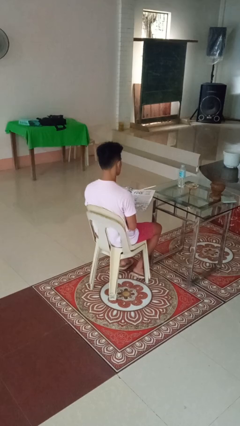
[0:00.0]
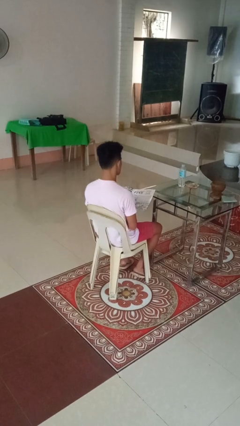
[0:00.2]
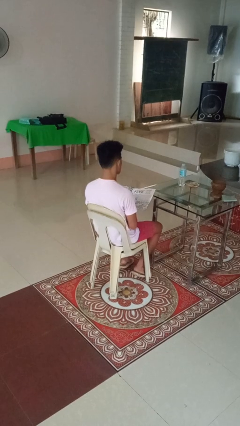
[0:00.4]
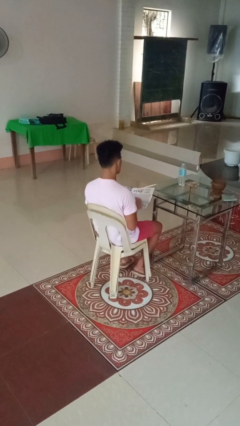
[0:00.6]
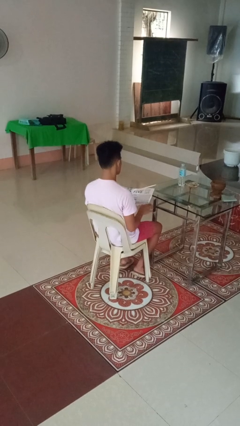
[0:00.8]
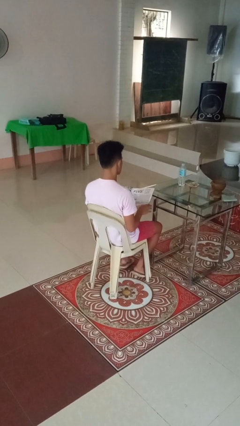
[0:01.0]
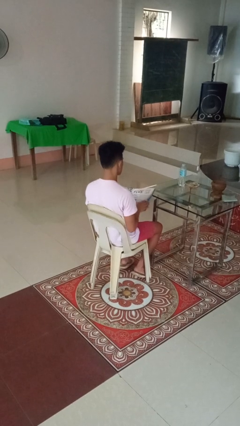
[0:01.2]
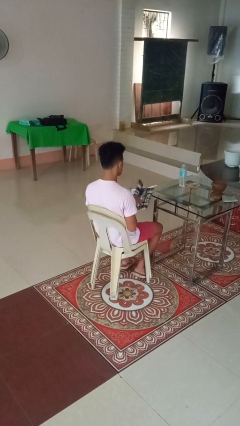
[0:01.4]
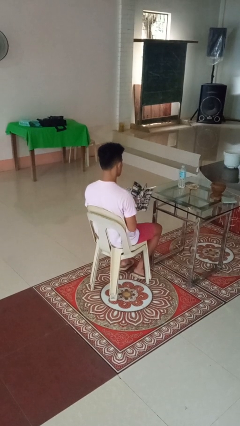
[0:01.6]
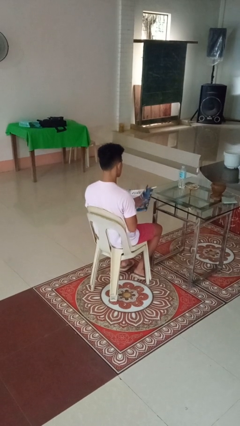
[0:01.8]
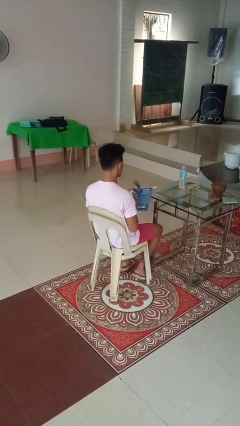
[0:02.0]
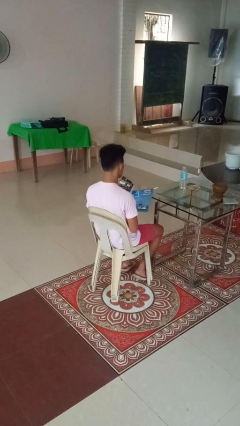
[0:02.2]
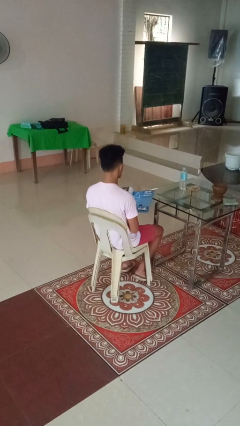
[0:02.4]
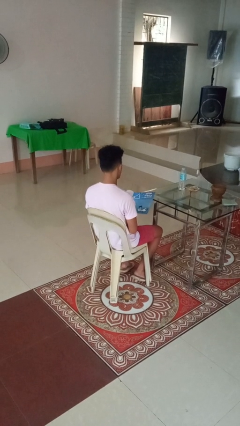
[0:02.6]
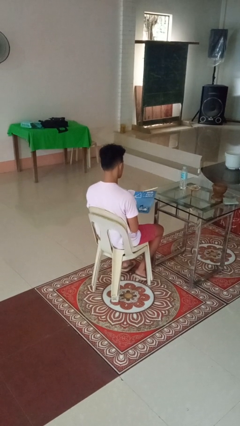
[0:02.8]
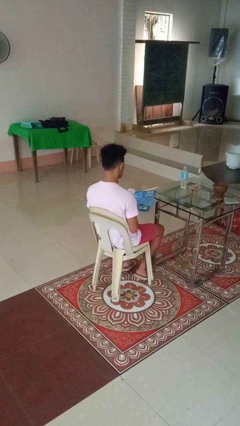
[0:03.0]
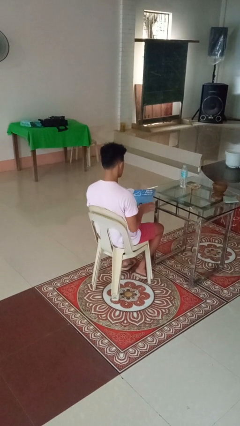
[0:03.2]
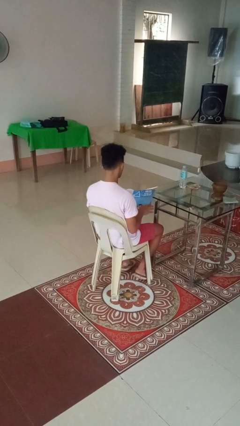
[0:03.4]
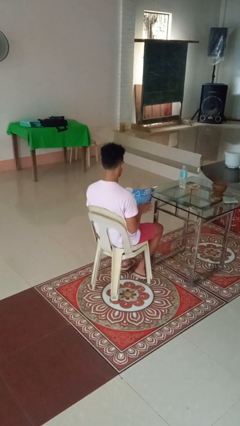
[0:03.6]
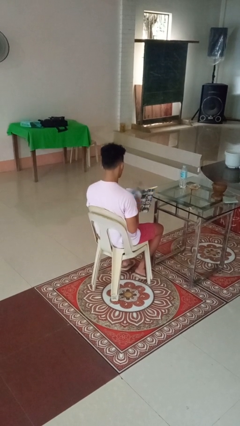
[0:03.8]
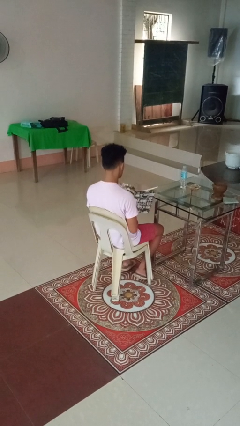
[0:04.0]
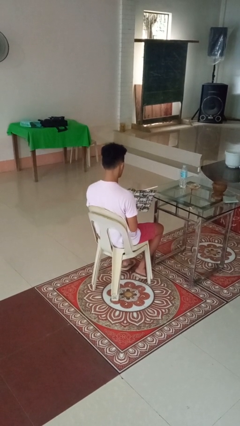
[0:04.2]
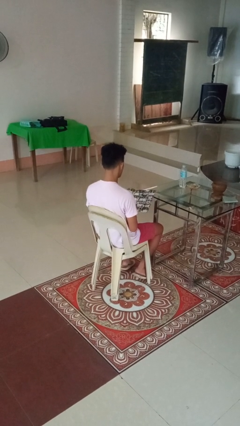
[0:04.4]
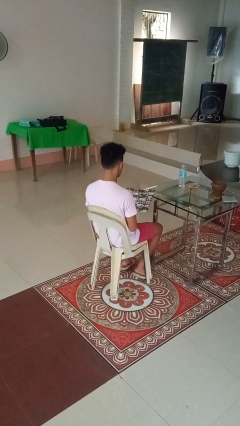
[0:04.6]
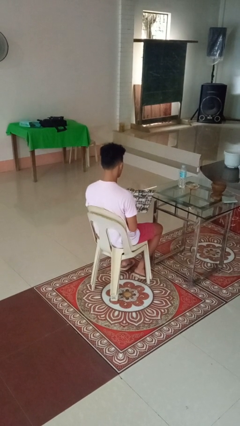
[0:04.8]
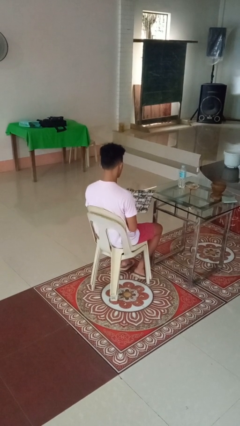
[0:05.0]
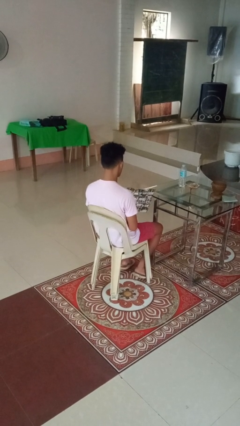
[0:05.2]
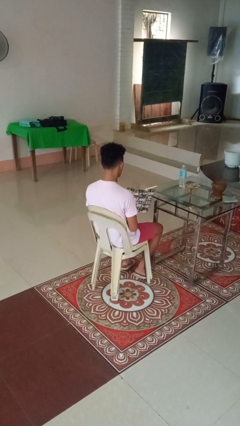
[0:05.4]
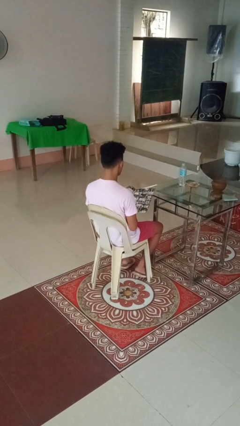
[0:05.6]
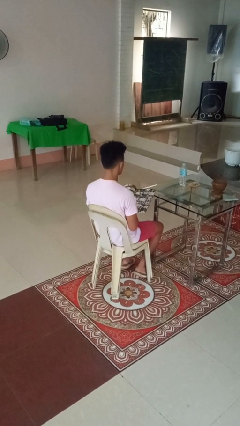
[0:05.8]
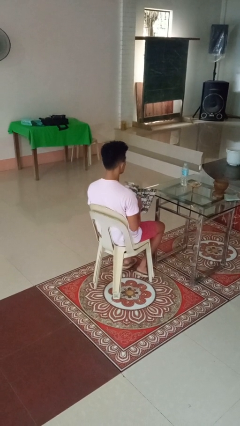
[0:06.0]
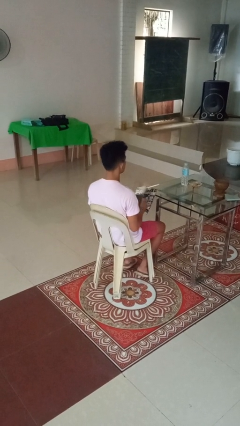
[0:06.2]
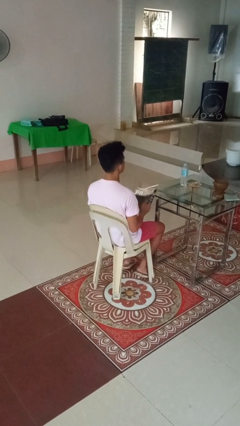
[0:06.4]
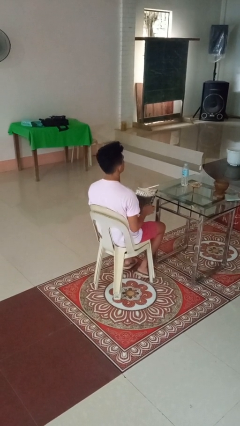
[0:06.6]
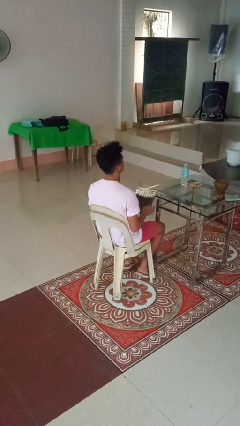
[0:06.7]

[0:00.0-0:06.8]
person reads magazine

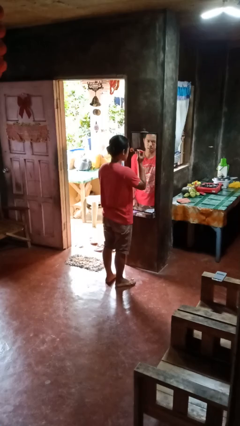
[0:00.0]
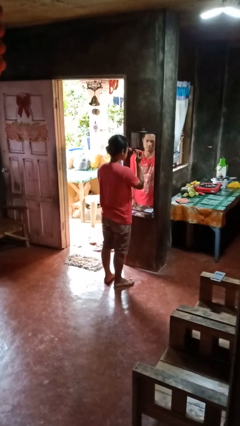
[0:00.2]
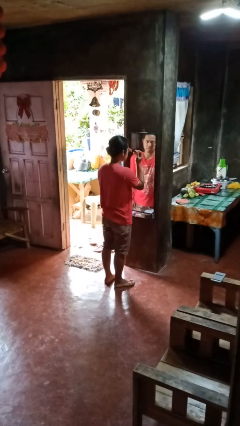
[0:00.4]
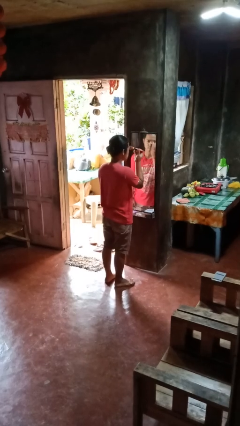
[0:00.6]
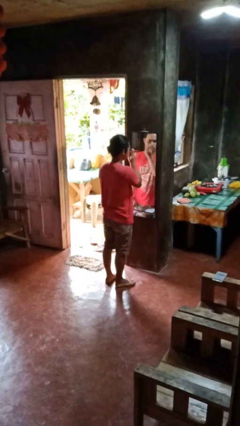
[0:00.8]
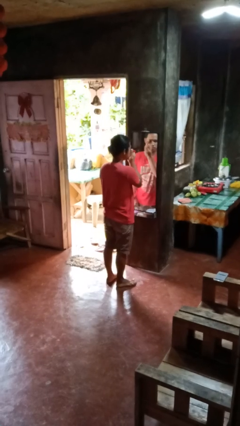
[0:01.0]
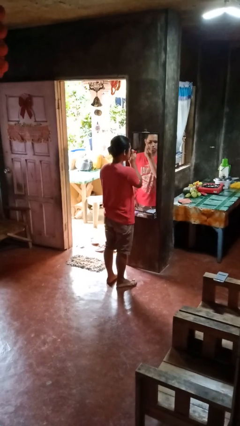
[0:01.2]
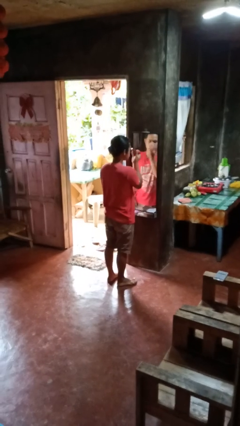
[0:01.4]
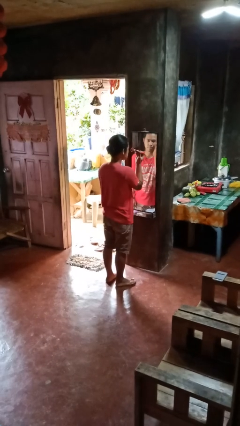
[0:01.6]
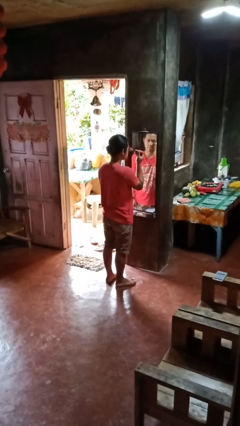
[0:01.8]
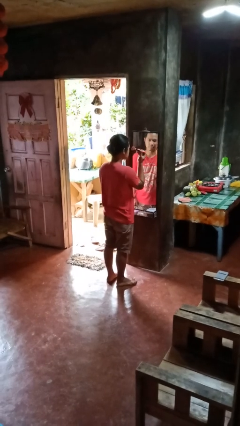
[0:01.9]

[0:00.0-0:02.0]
person applies eye makeup

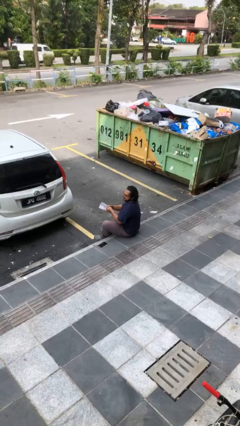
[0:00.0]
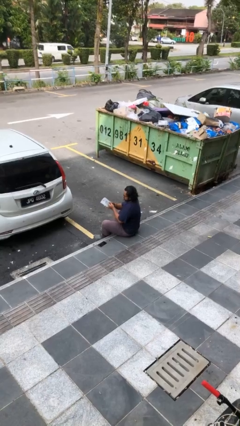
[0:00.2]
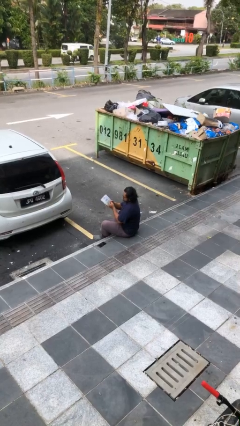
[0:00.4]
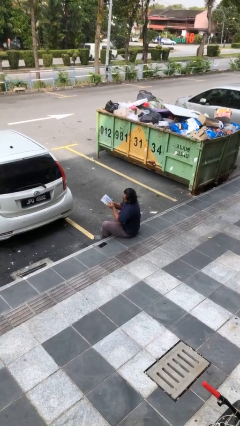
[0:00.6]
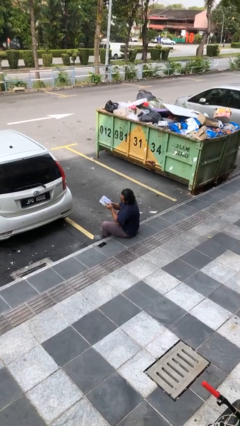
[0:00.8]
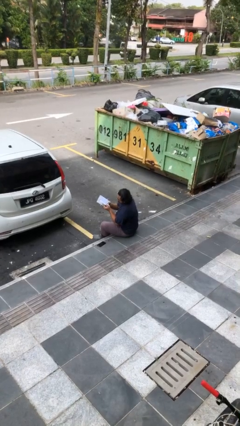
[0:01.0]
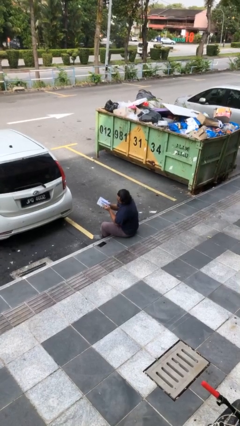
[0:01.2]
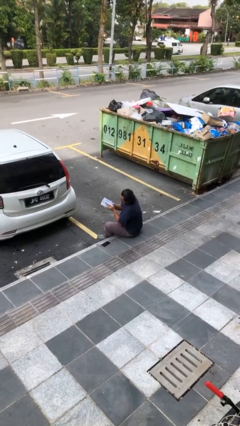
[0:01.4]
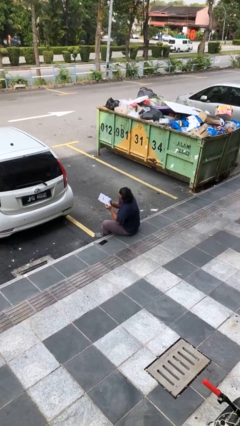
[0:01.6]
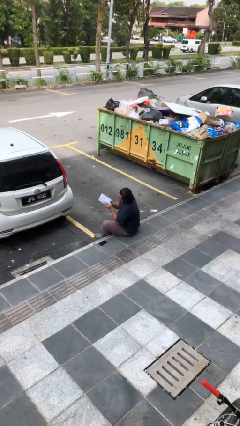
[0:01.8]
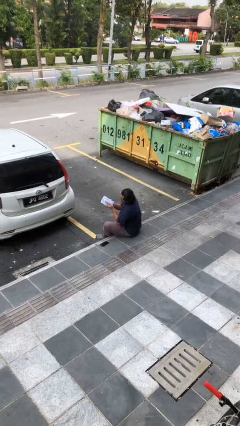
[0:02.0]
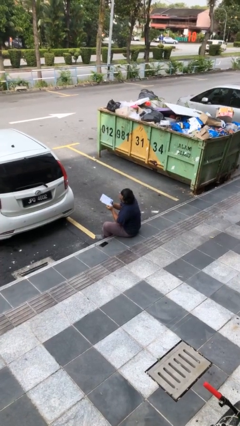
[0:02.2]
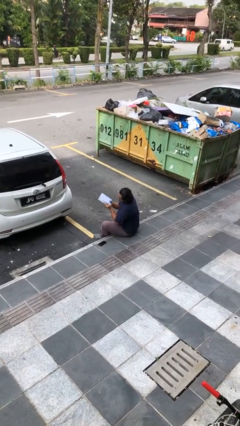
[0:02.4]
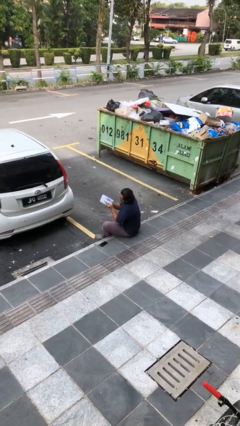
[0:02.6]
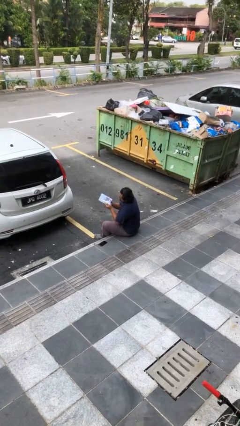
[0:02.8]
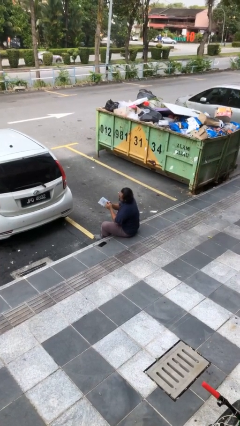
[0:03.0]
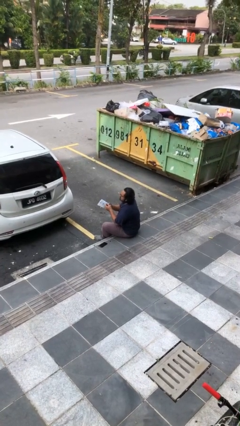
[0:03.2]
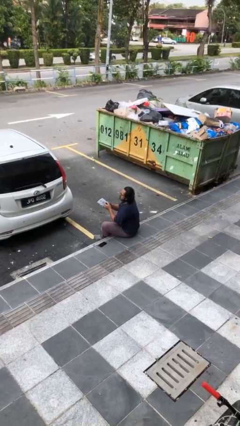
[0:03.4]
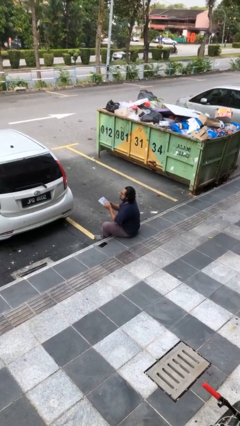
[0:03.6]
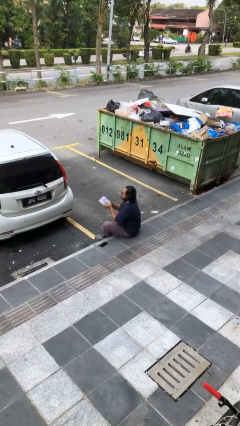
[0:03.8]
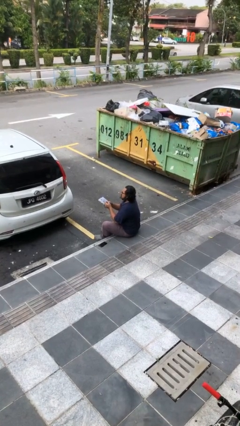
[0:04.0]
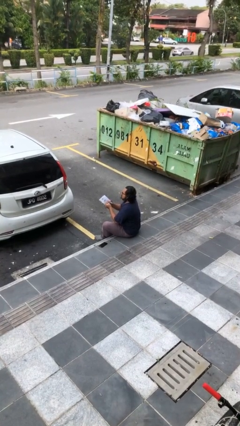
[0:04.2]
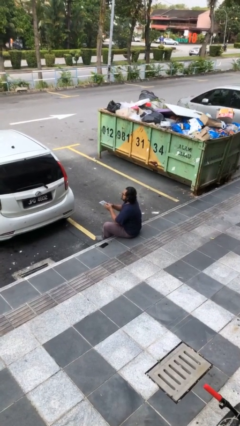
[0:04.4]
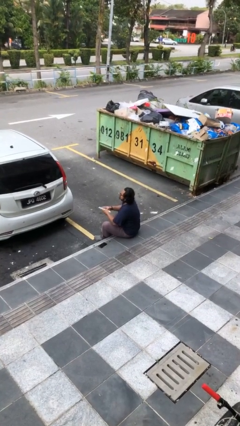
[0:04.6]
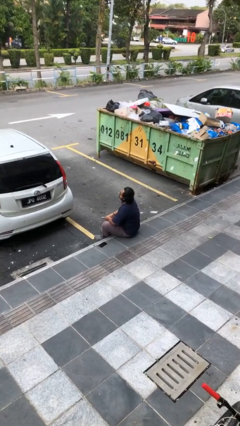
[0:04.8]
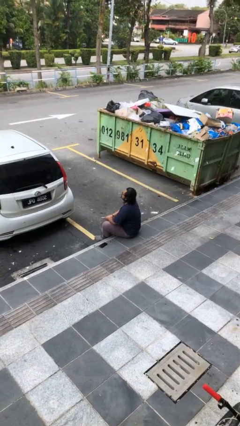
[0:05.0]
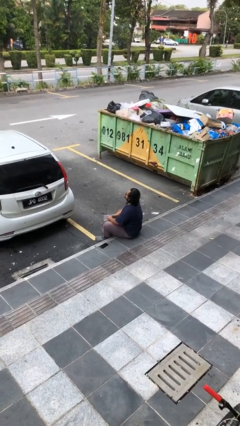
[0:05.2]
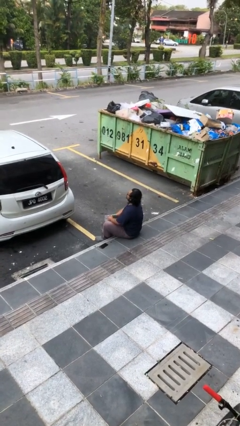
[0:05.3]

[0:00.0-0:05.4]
person reads document

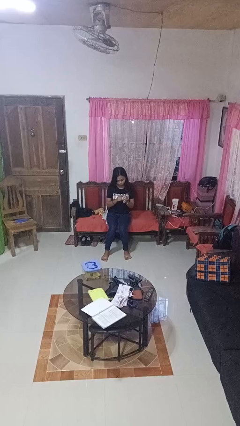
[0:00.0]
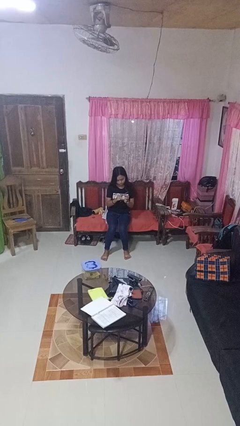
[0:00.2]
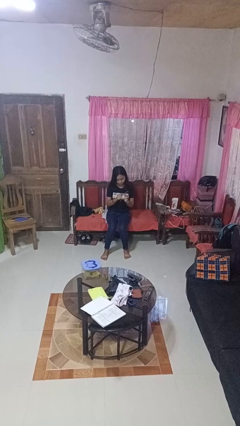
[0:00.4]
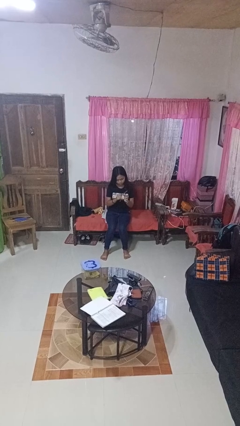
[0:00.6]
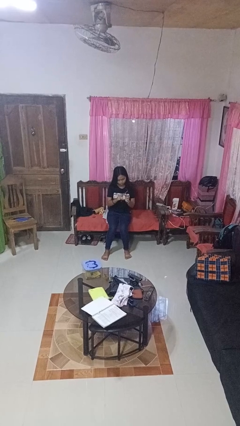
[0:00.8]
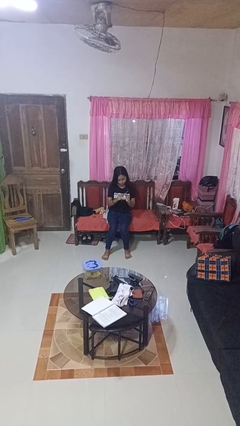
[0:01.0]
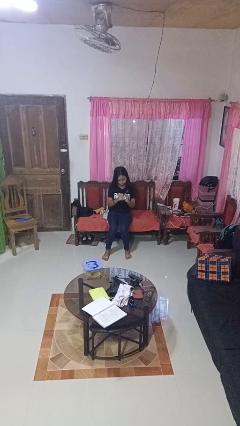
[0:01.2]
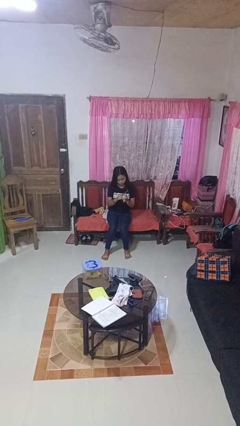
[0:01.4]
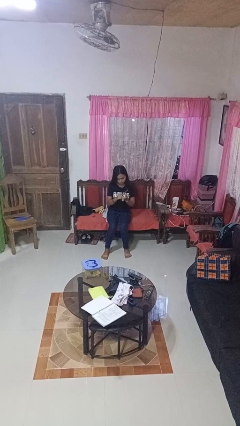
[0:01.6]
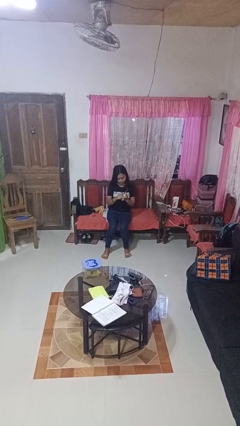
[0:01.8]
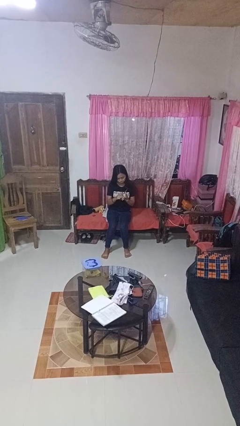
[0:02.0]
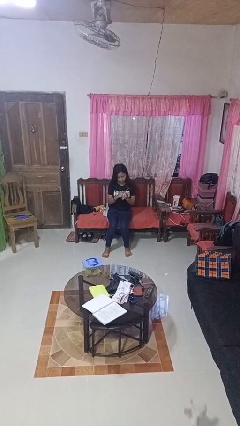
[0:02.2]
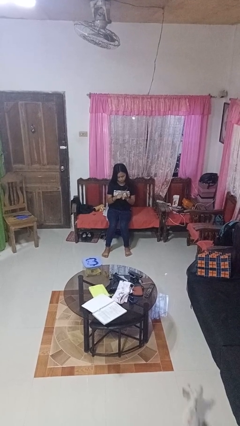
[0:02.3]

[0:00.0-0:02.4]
person files fingernails

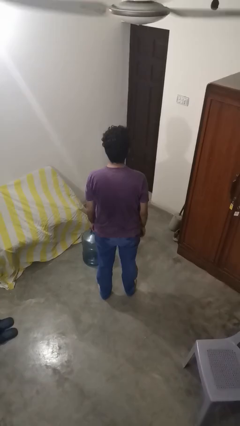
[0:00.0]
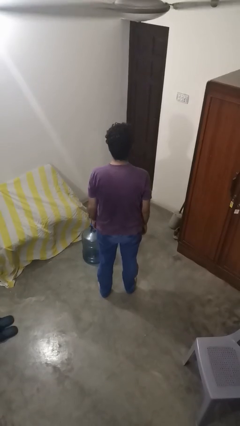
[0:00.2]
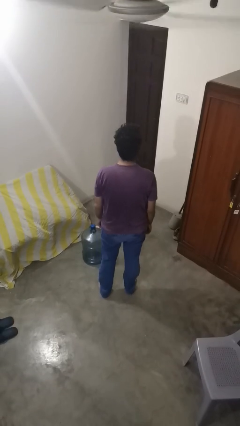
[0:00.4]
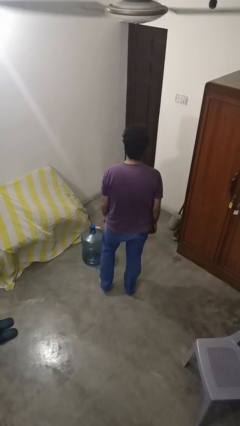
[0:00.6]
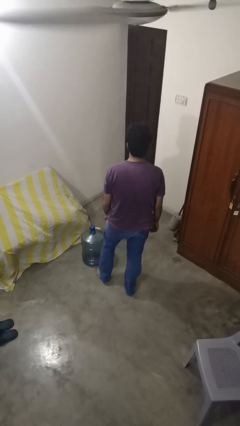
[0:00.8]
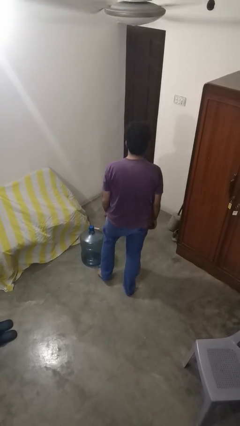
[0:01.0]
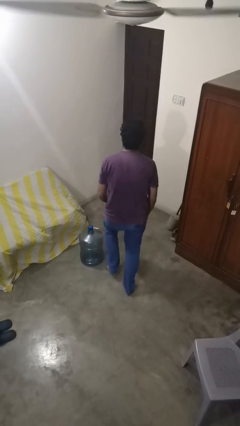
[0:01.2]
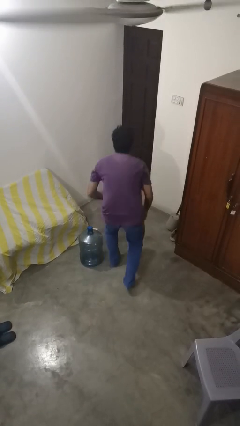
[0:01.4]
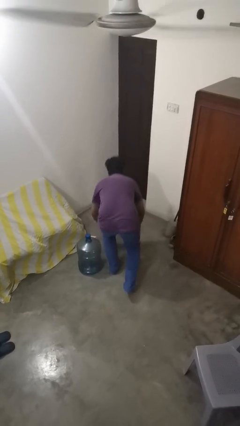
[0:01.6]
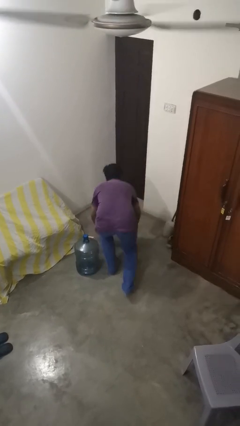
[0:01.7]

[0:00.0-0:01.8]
person trips on object on floor
